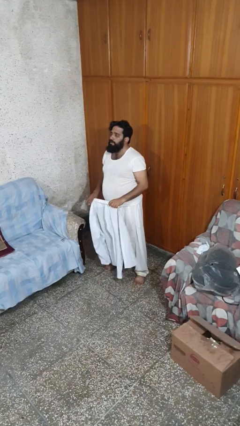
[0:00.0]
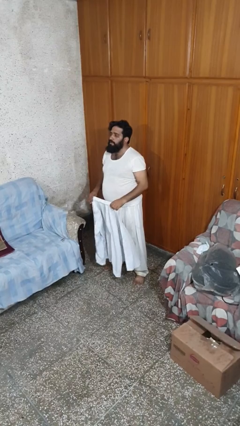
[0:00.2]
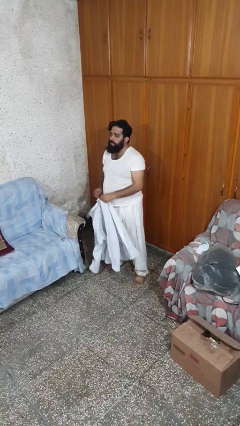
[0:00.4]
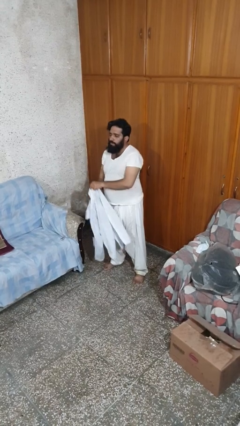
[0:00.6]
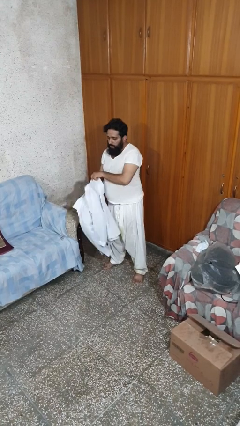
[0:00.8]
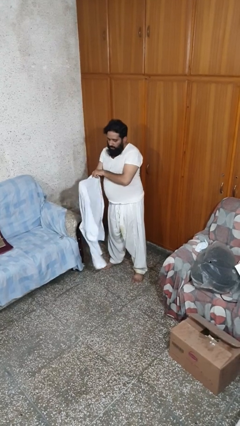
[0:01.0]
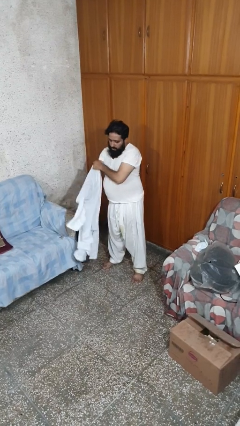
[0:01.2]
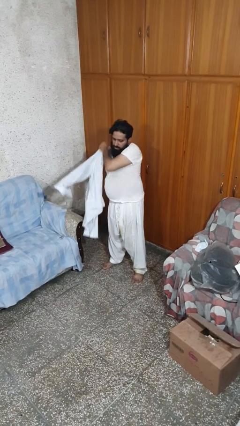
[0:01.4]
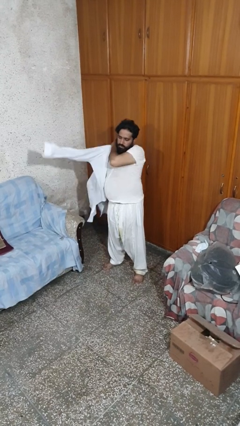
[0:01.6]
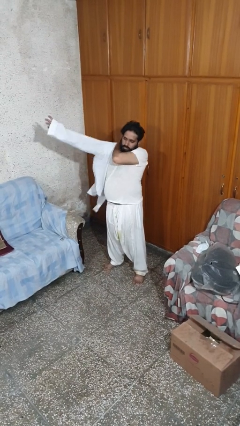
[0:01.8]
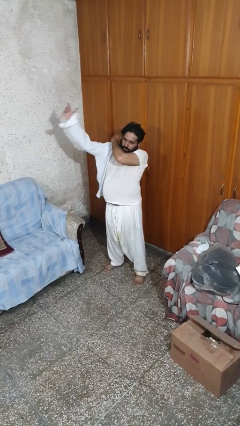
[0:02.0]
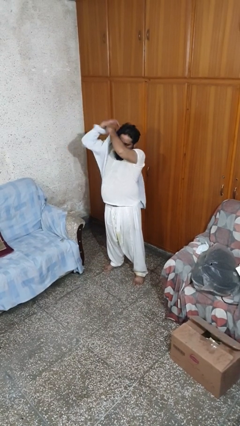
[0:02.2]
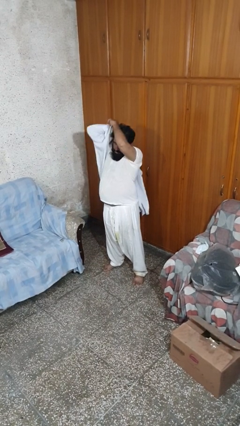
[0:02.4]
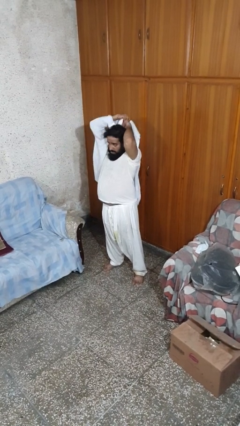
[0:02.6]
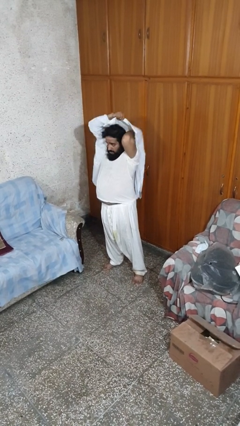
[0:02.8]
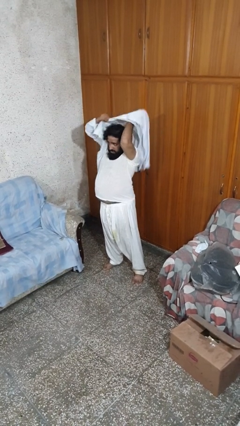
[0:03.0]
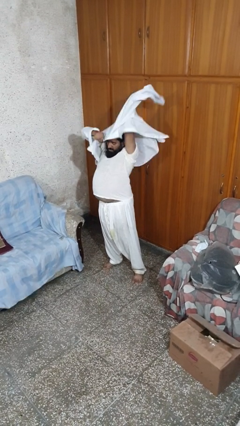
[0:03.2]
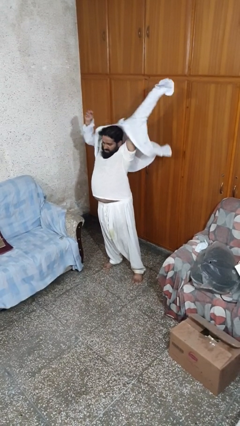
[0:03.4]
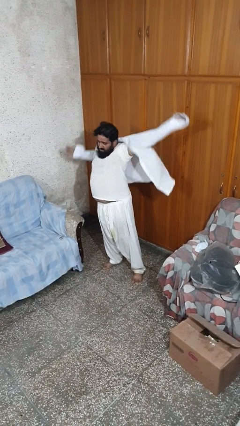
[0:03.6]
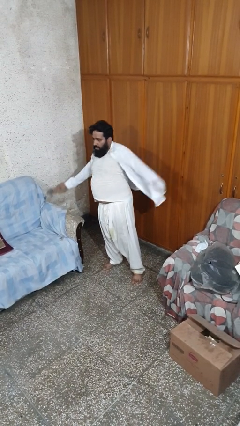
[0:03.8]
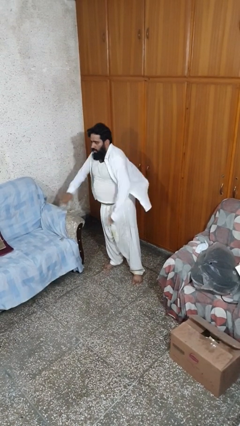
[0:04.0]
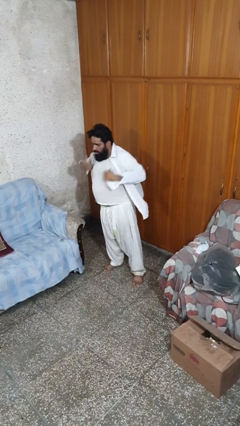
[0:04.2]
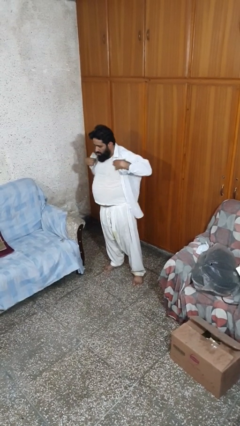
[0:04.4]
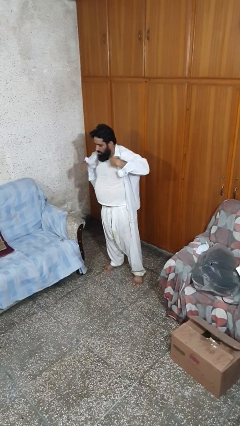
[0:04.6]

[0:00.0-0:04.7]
person puts on shirt

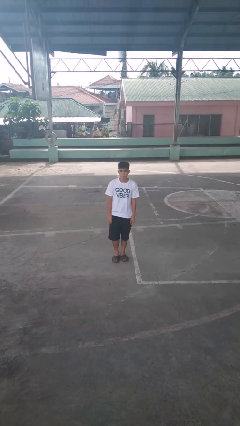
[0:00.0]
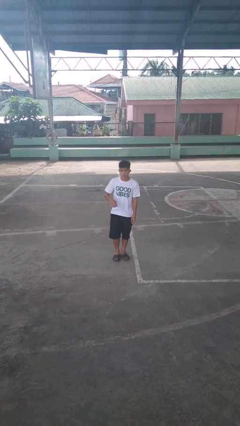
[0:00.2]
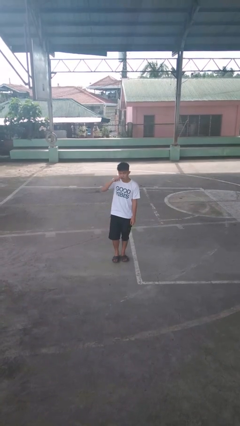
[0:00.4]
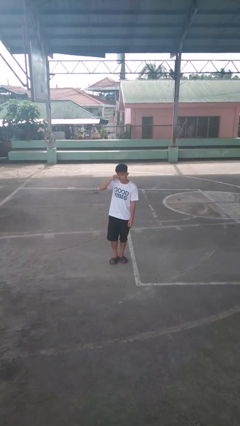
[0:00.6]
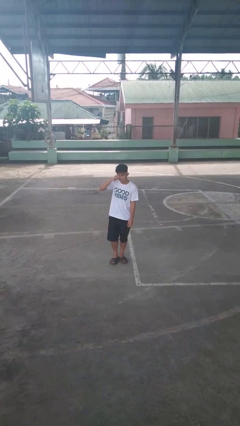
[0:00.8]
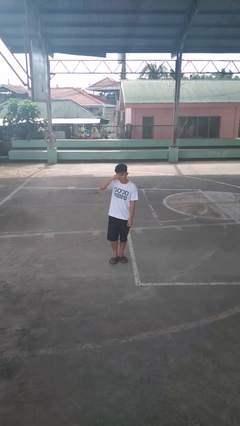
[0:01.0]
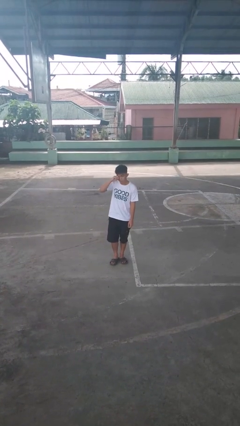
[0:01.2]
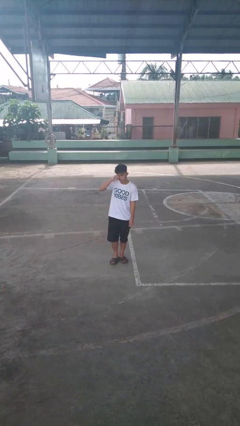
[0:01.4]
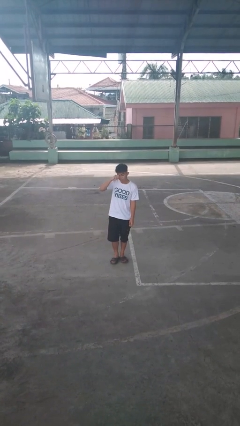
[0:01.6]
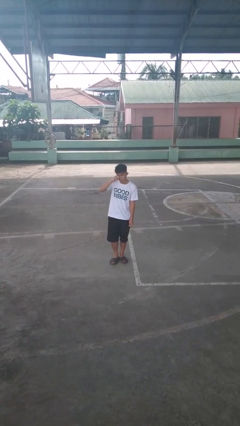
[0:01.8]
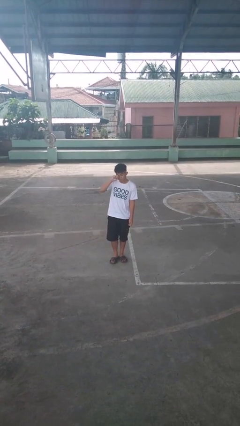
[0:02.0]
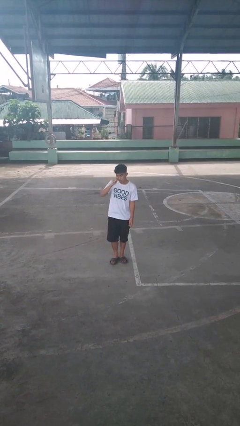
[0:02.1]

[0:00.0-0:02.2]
person rubs eyes

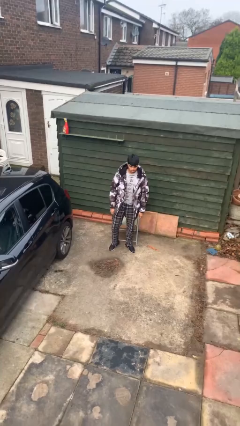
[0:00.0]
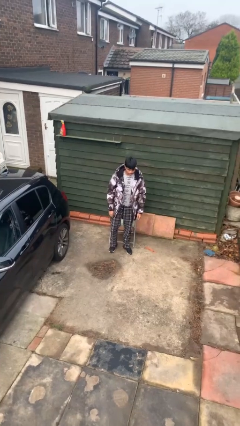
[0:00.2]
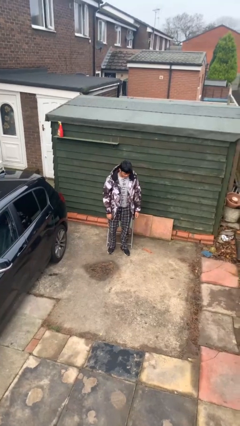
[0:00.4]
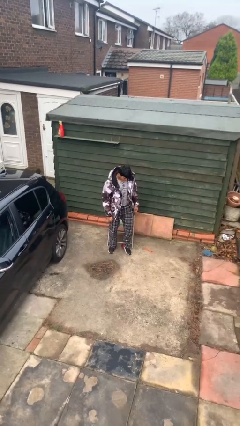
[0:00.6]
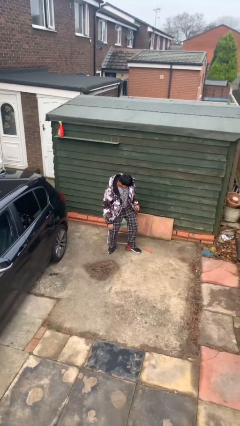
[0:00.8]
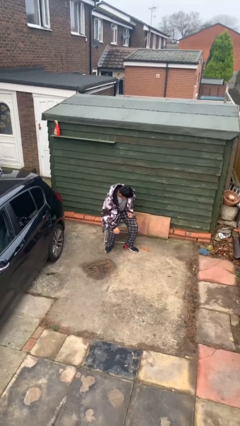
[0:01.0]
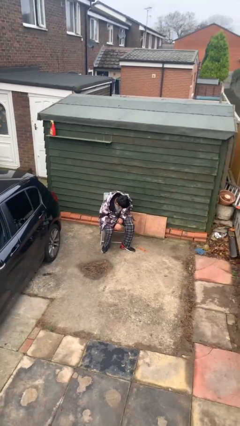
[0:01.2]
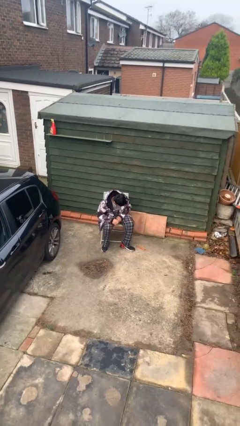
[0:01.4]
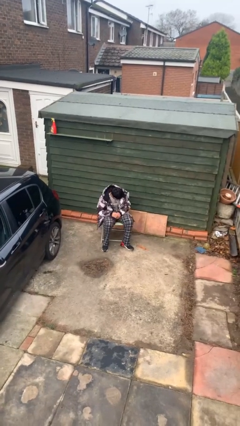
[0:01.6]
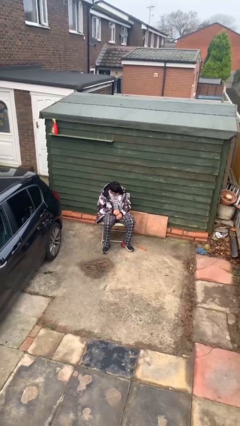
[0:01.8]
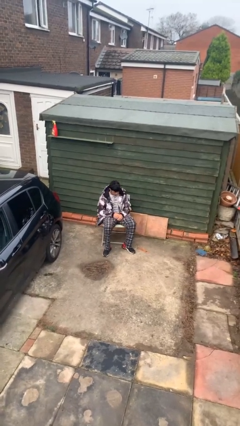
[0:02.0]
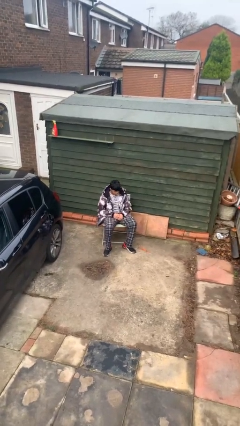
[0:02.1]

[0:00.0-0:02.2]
person sits down

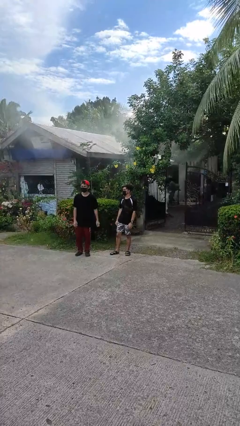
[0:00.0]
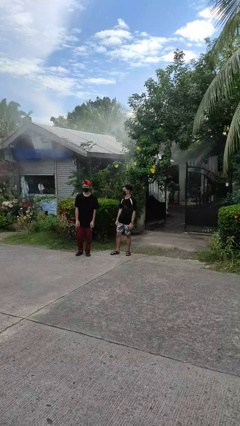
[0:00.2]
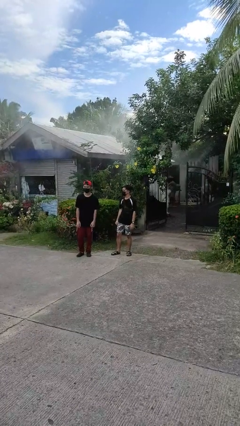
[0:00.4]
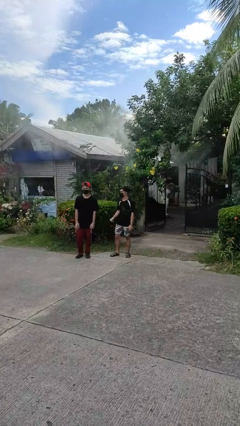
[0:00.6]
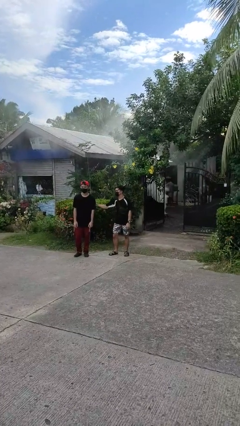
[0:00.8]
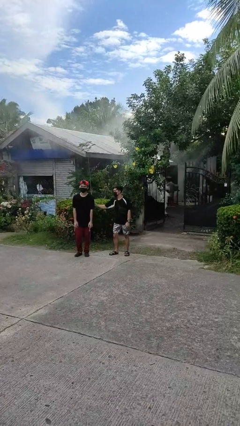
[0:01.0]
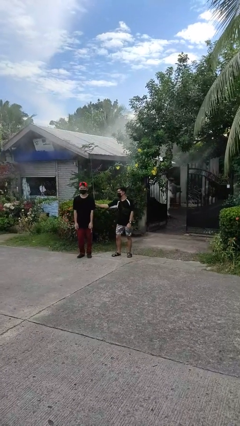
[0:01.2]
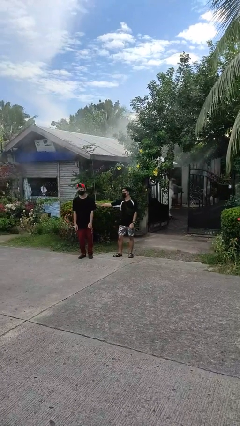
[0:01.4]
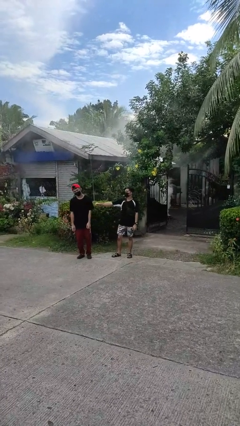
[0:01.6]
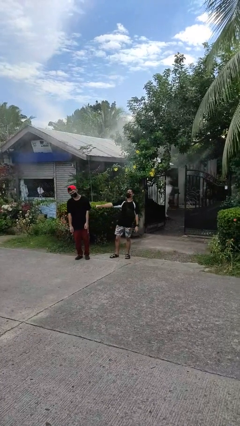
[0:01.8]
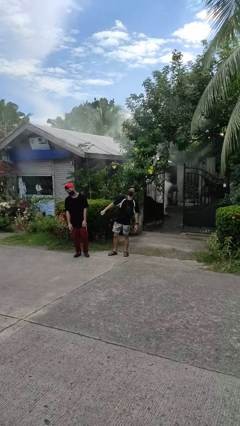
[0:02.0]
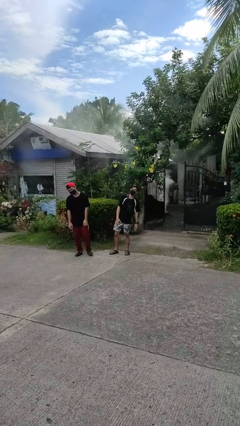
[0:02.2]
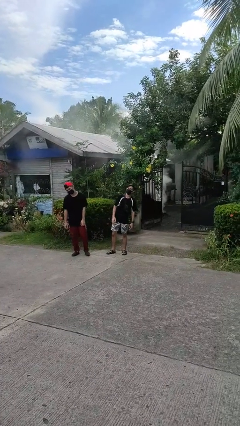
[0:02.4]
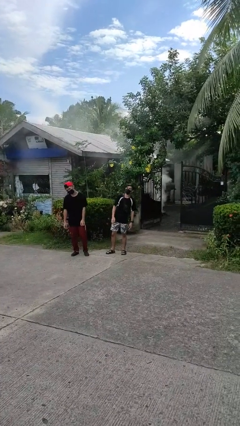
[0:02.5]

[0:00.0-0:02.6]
person pounds shoulders of person

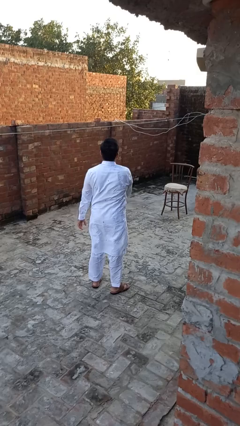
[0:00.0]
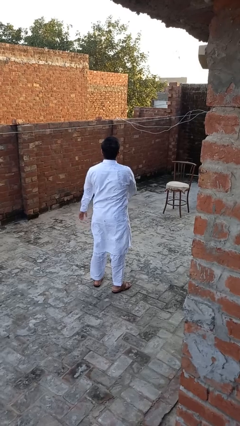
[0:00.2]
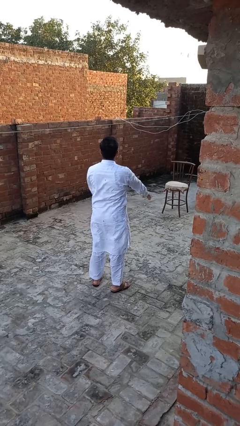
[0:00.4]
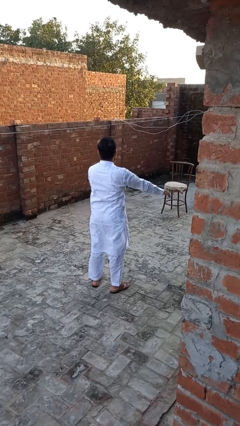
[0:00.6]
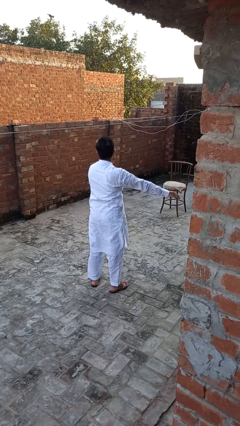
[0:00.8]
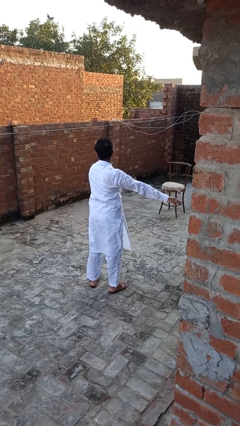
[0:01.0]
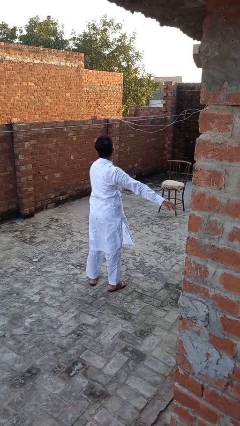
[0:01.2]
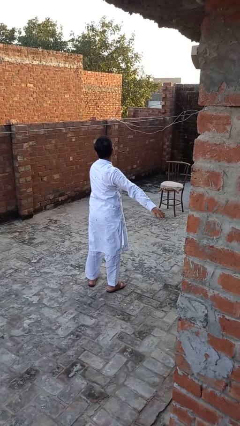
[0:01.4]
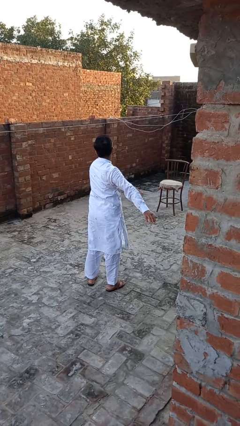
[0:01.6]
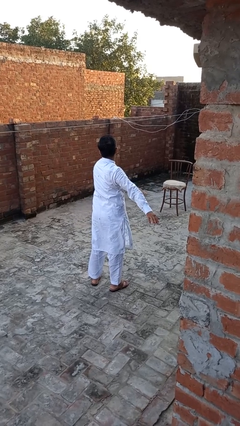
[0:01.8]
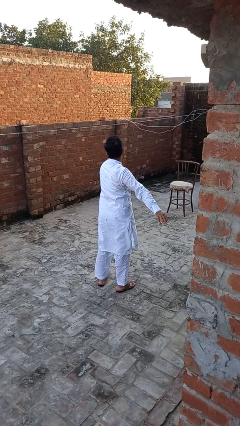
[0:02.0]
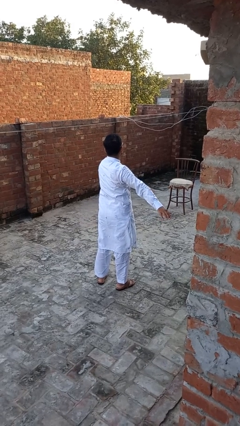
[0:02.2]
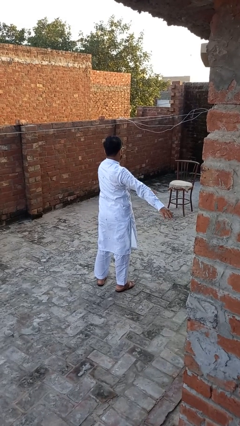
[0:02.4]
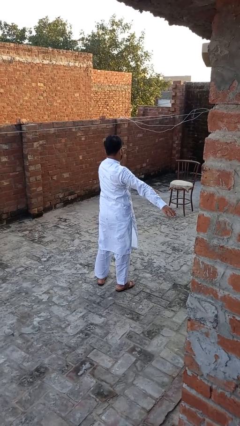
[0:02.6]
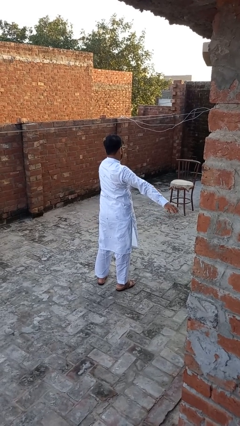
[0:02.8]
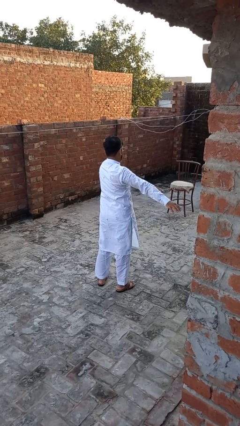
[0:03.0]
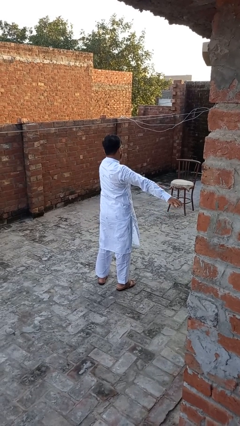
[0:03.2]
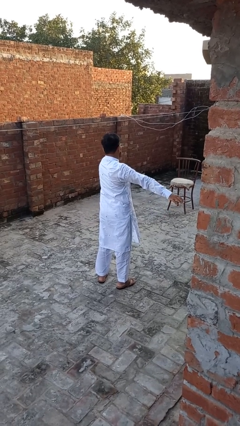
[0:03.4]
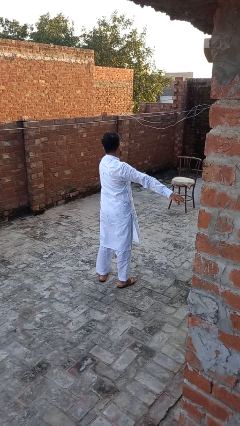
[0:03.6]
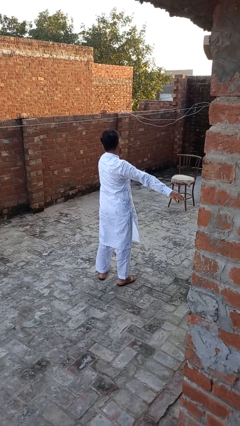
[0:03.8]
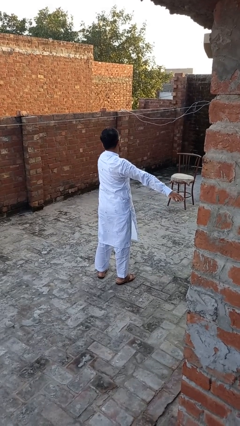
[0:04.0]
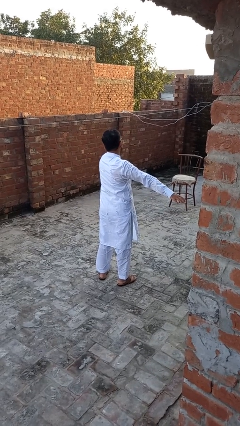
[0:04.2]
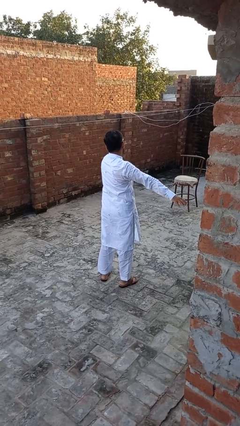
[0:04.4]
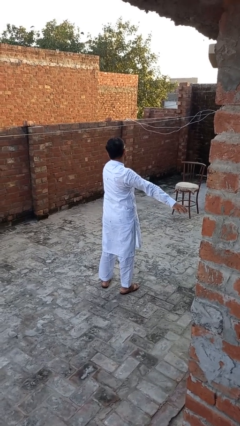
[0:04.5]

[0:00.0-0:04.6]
person gestures swipe right

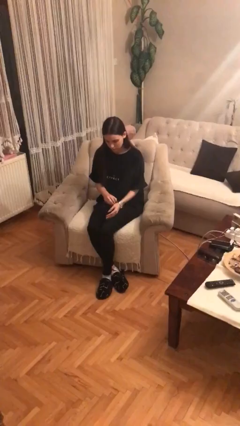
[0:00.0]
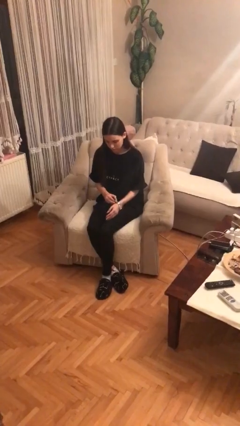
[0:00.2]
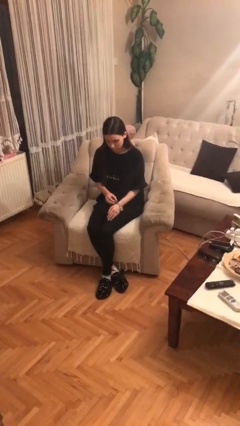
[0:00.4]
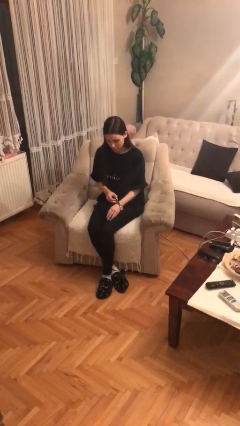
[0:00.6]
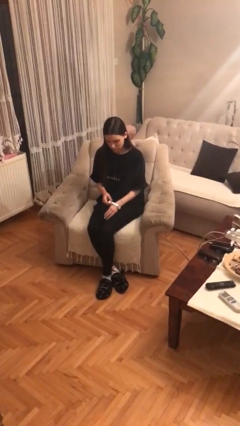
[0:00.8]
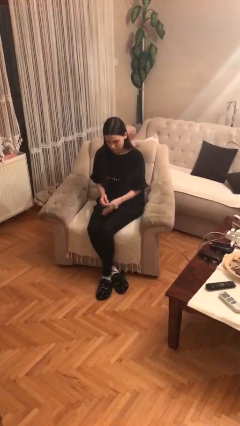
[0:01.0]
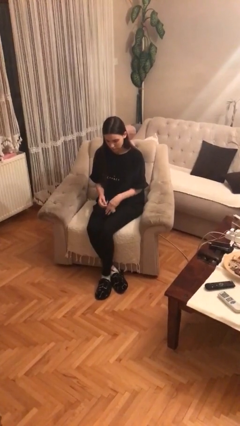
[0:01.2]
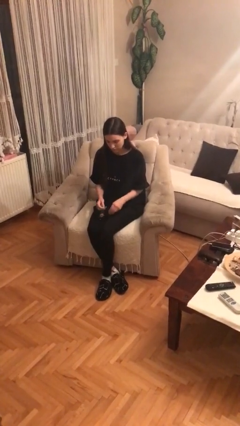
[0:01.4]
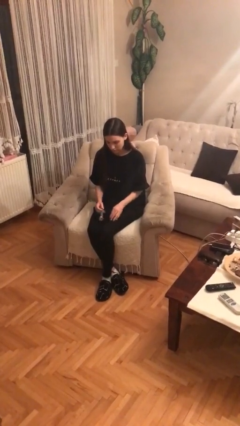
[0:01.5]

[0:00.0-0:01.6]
person takes off wristwatch
